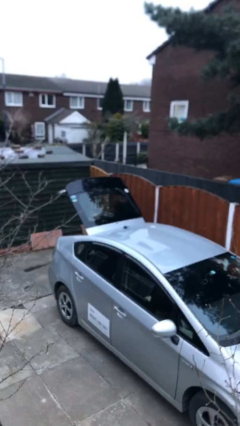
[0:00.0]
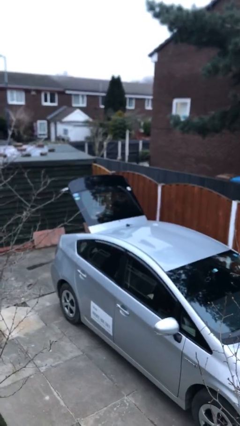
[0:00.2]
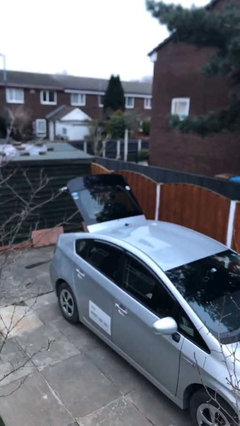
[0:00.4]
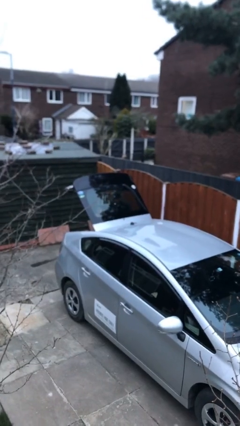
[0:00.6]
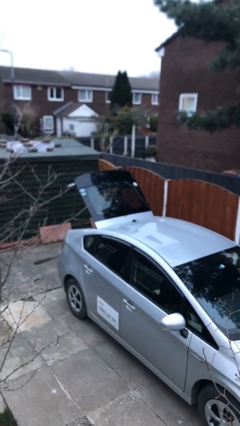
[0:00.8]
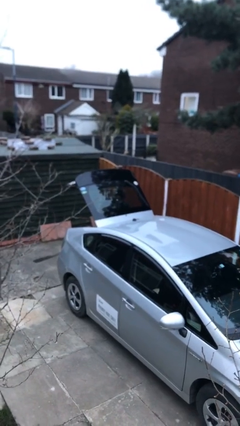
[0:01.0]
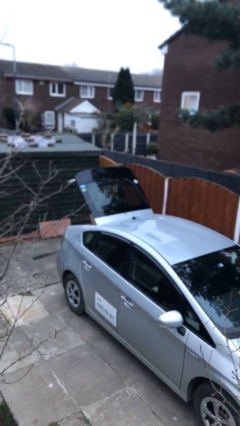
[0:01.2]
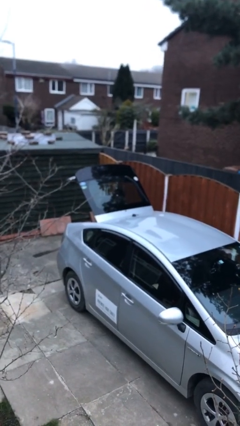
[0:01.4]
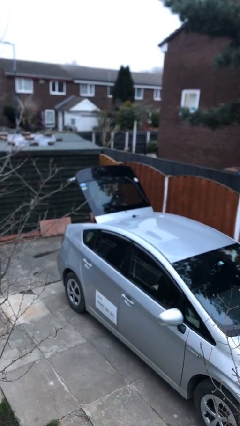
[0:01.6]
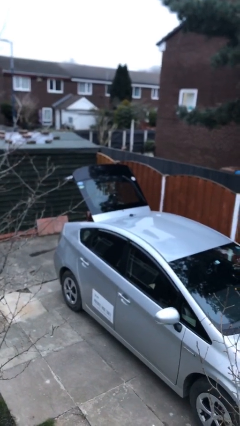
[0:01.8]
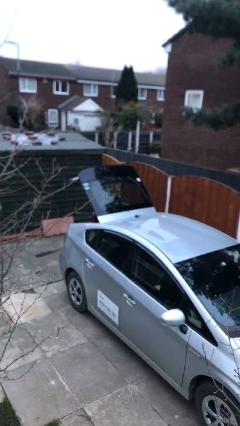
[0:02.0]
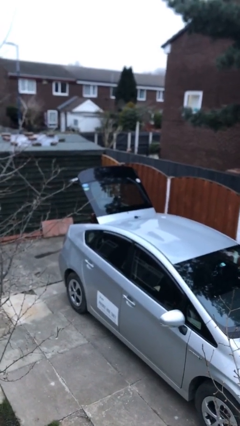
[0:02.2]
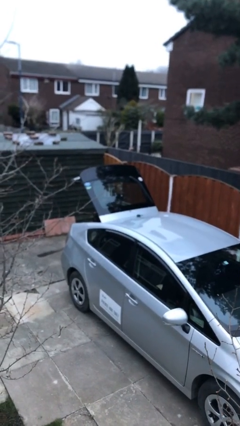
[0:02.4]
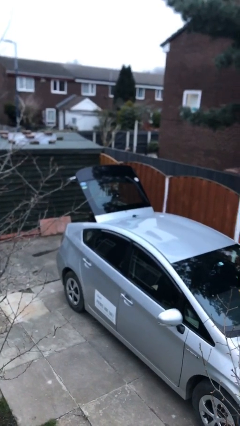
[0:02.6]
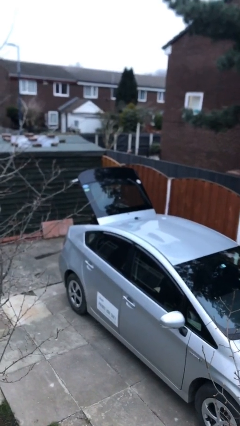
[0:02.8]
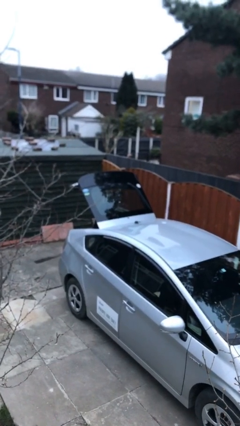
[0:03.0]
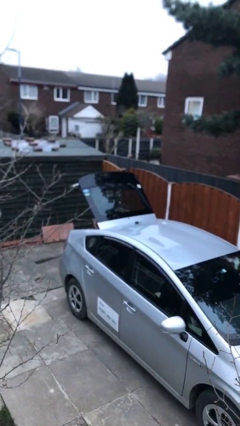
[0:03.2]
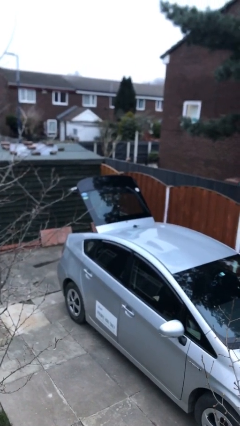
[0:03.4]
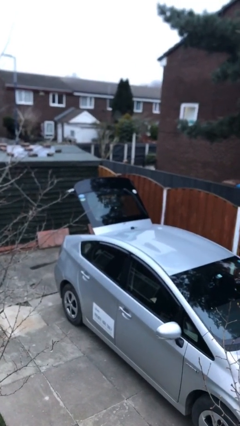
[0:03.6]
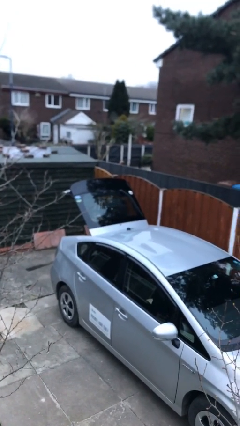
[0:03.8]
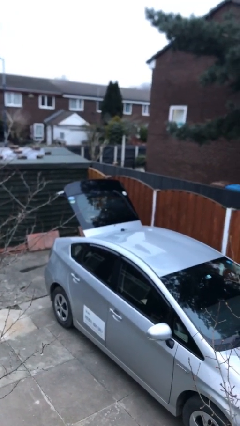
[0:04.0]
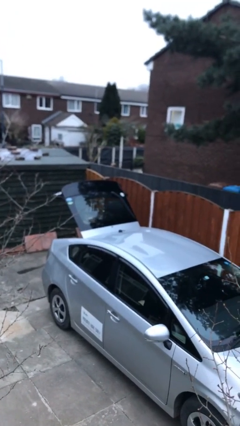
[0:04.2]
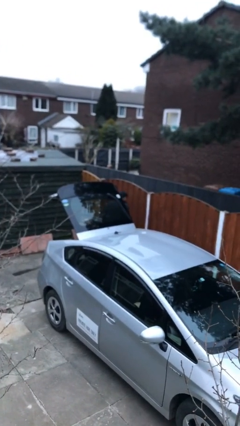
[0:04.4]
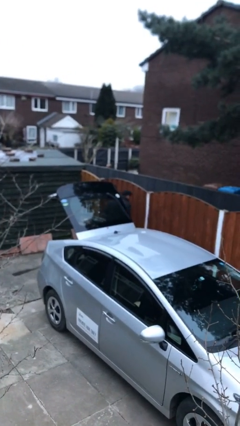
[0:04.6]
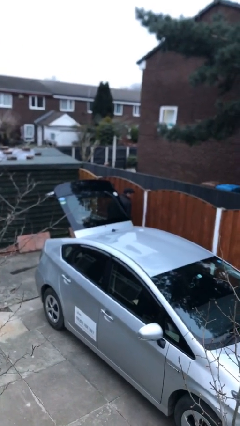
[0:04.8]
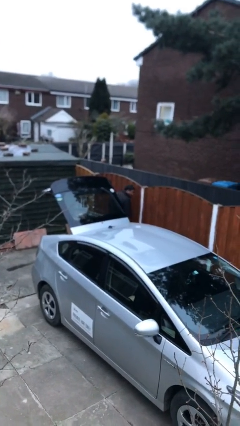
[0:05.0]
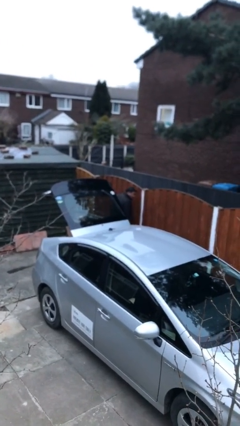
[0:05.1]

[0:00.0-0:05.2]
person loads car

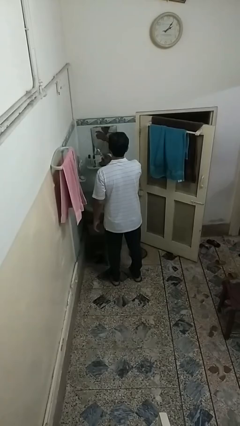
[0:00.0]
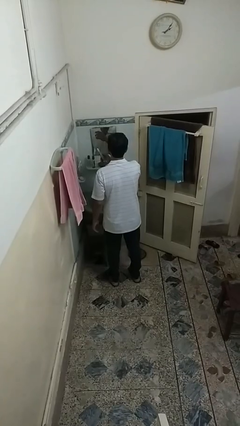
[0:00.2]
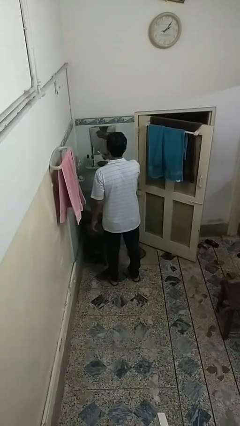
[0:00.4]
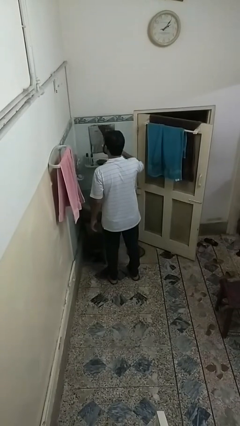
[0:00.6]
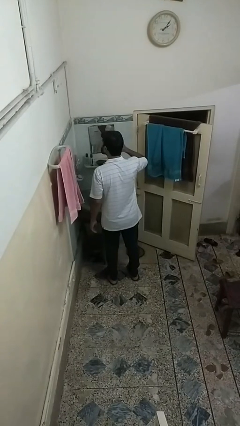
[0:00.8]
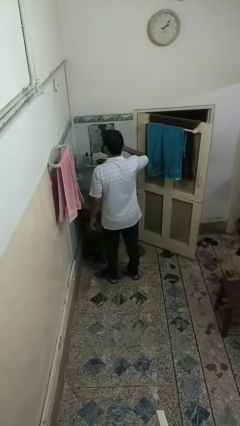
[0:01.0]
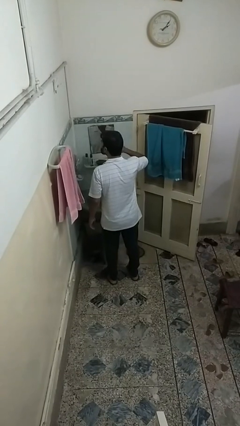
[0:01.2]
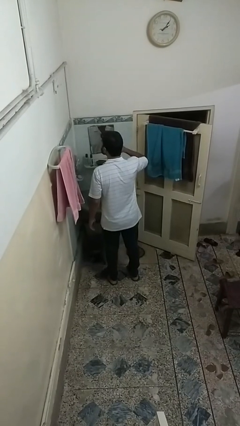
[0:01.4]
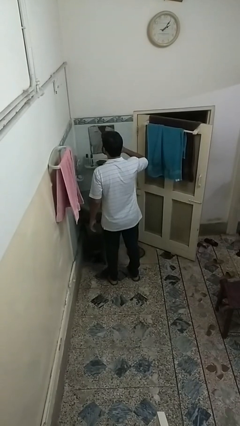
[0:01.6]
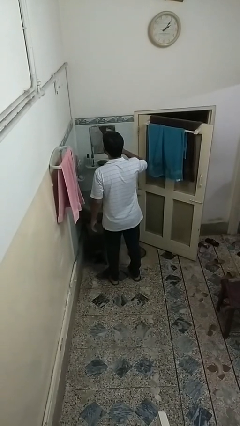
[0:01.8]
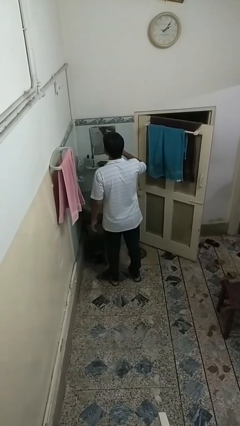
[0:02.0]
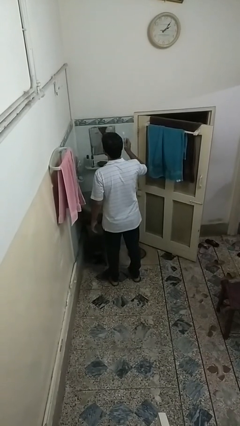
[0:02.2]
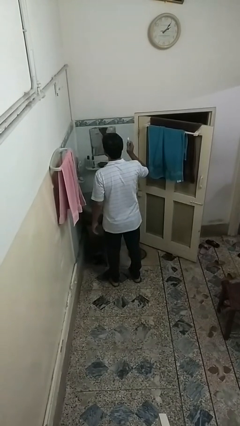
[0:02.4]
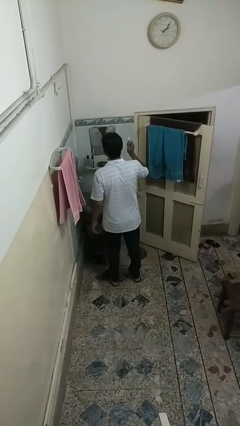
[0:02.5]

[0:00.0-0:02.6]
person brushes teeth

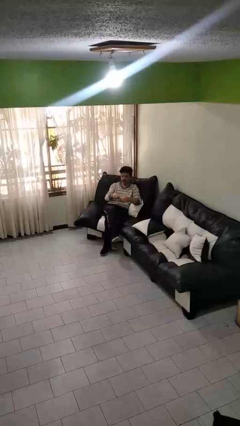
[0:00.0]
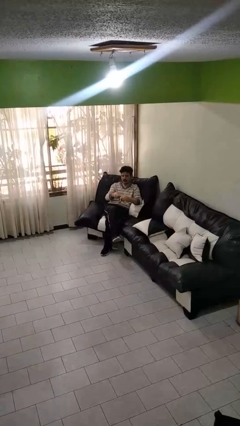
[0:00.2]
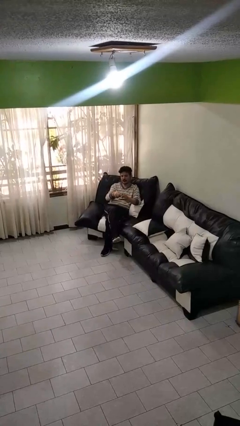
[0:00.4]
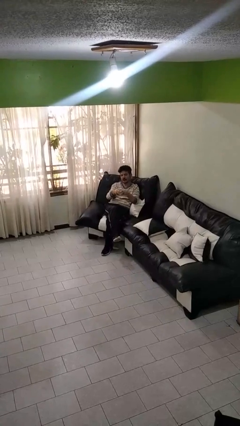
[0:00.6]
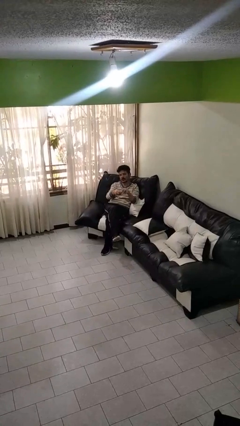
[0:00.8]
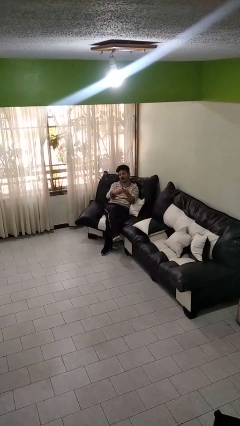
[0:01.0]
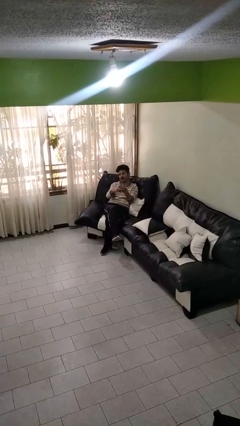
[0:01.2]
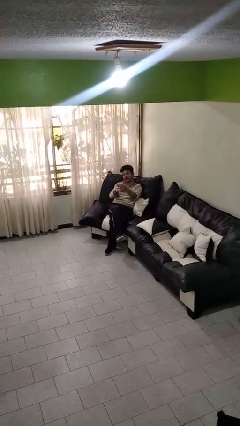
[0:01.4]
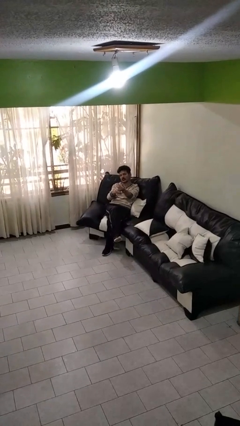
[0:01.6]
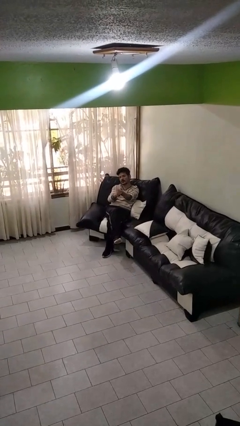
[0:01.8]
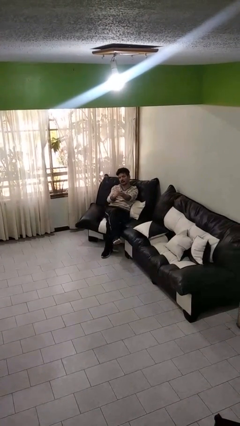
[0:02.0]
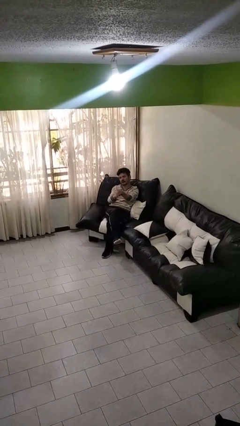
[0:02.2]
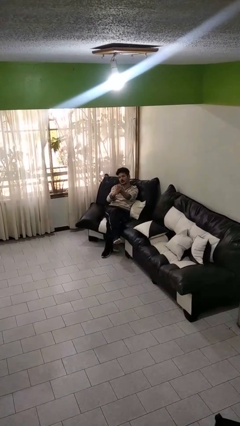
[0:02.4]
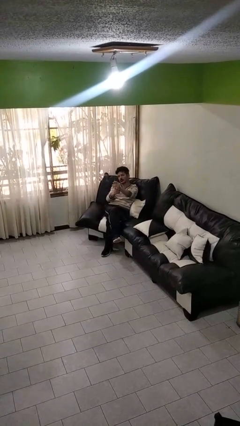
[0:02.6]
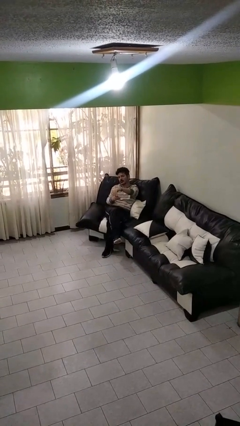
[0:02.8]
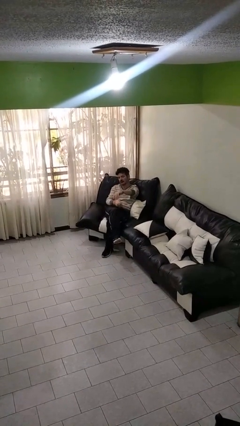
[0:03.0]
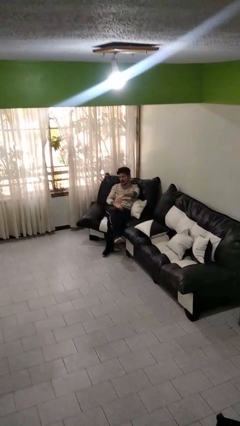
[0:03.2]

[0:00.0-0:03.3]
person puts on wristwatch

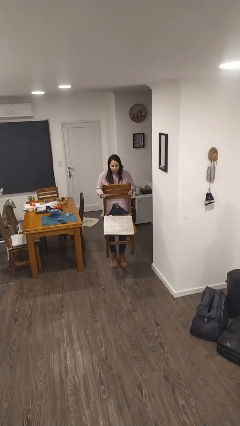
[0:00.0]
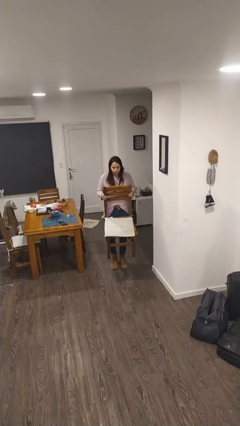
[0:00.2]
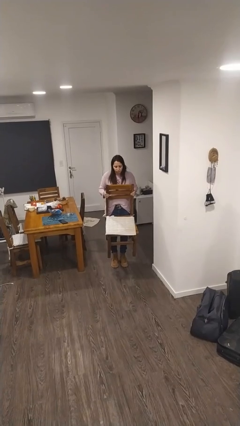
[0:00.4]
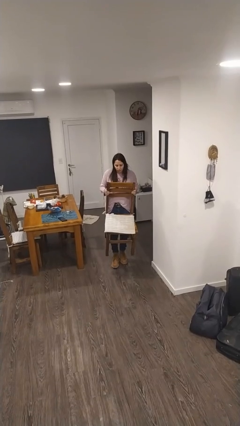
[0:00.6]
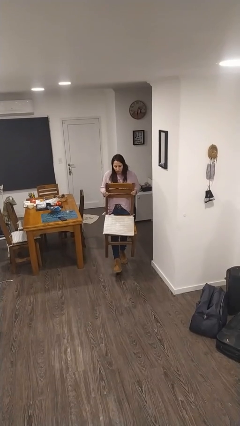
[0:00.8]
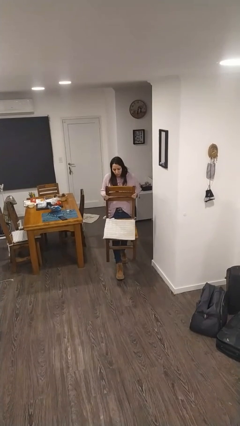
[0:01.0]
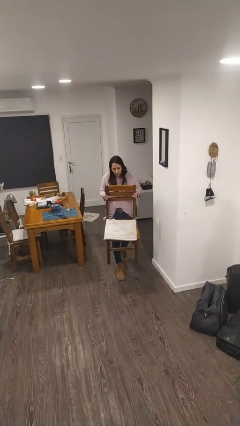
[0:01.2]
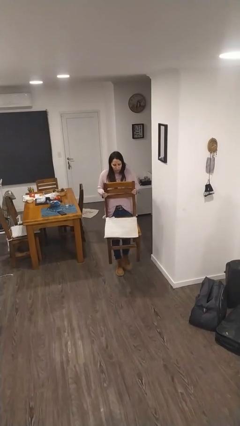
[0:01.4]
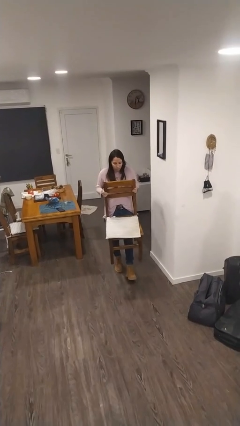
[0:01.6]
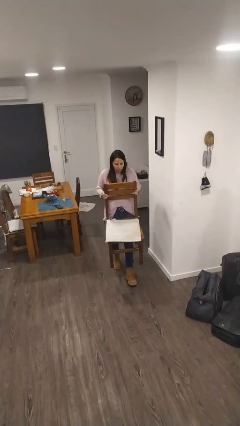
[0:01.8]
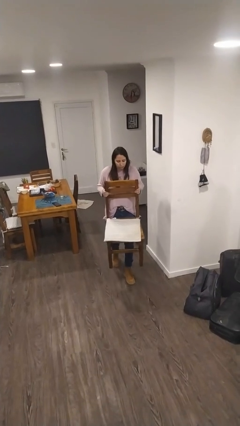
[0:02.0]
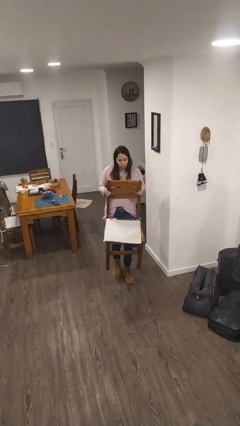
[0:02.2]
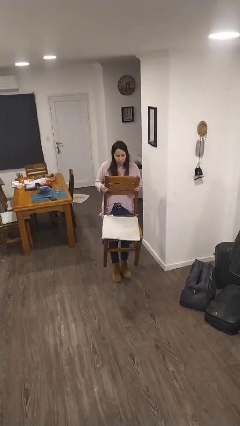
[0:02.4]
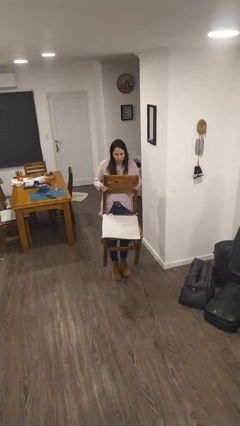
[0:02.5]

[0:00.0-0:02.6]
person carries furniture

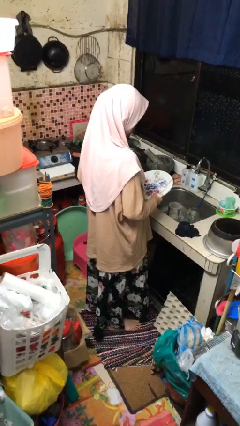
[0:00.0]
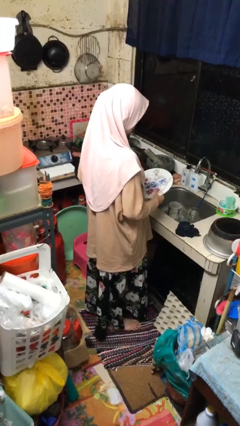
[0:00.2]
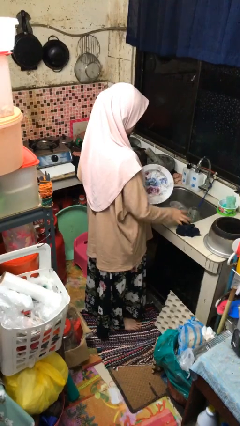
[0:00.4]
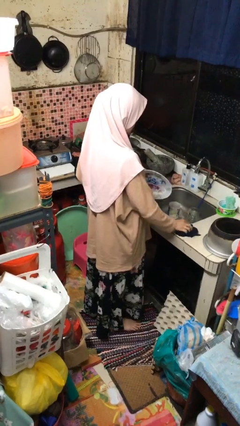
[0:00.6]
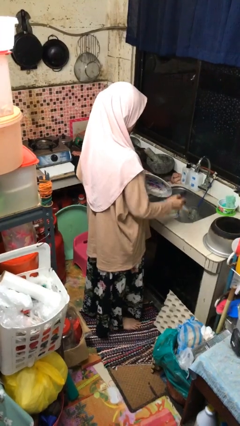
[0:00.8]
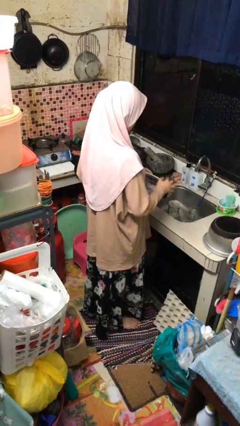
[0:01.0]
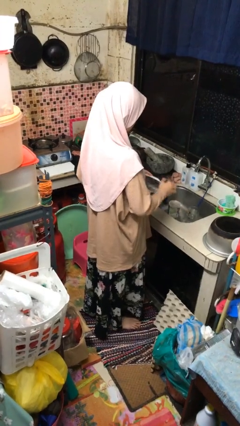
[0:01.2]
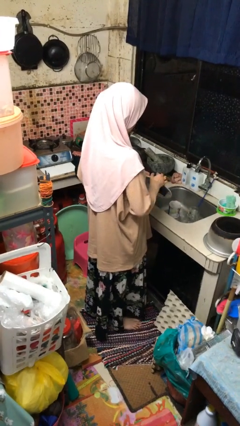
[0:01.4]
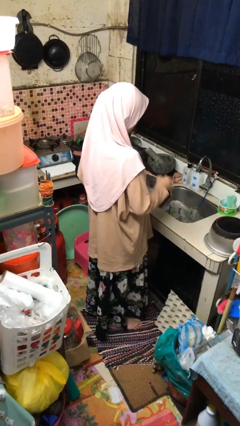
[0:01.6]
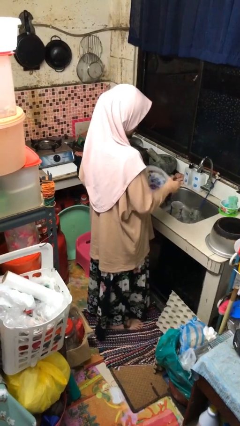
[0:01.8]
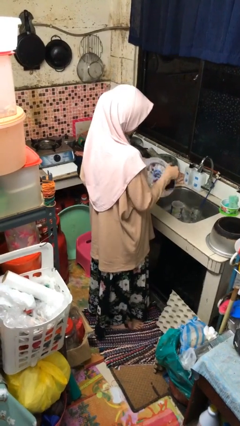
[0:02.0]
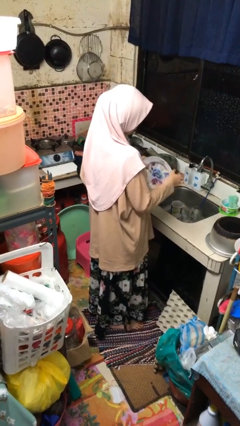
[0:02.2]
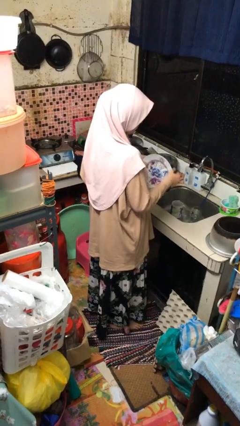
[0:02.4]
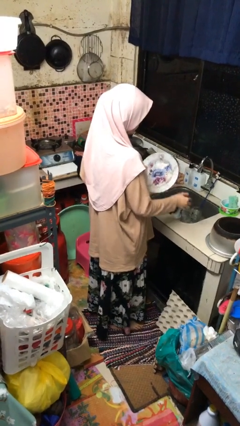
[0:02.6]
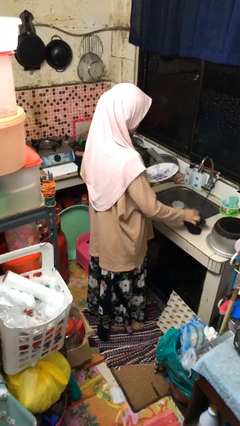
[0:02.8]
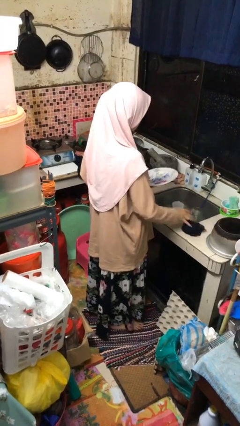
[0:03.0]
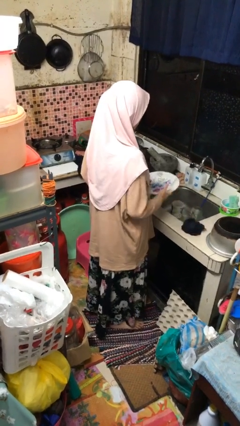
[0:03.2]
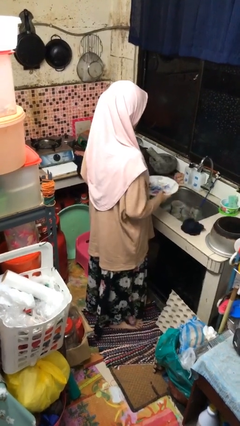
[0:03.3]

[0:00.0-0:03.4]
person dries dish

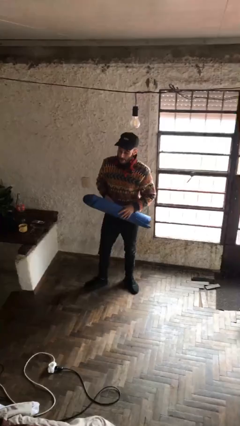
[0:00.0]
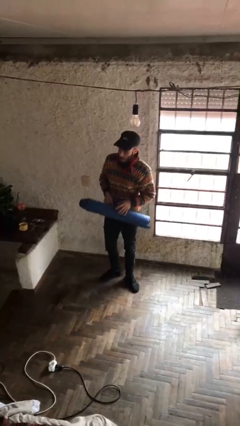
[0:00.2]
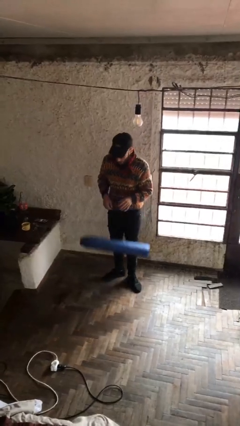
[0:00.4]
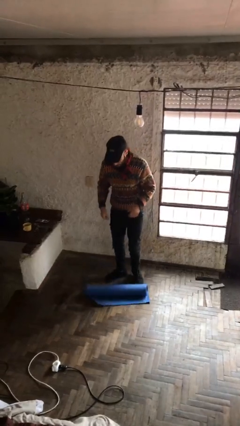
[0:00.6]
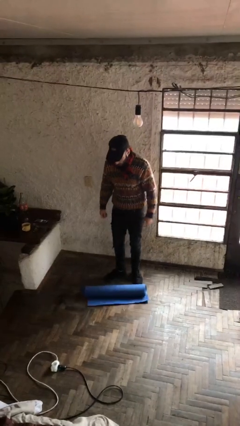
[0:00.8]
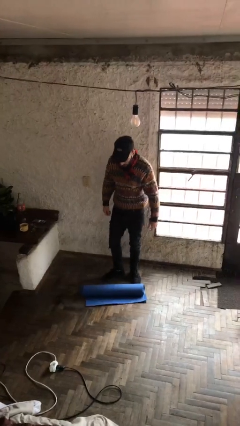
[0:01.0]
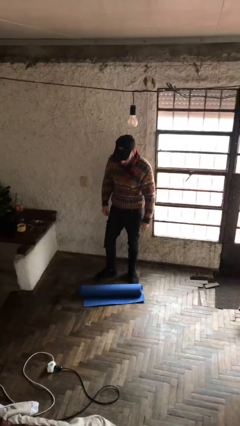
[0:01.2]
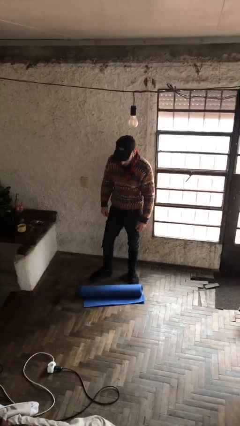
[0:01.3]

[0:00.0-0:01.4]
person drops object
